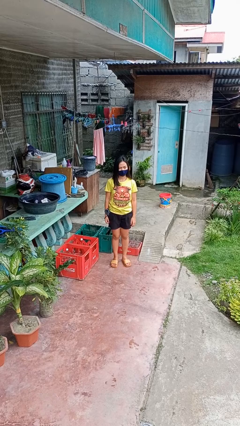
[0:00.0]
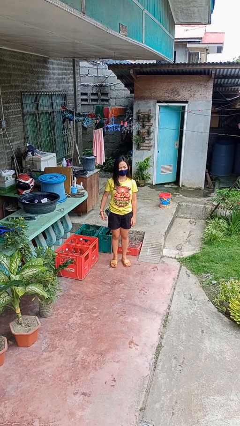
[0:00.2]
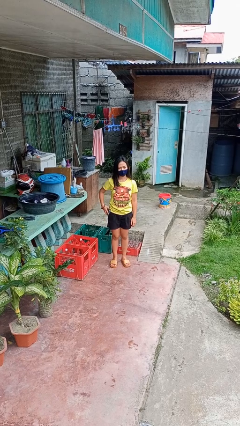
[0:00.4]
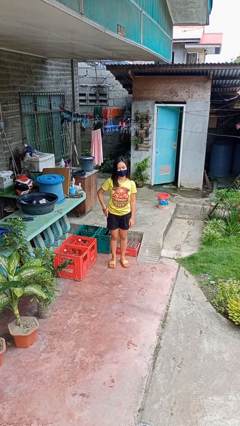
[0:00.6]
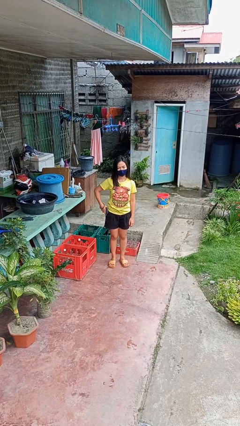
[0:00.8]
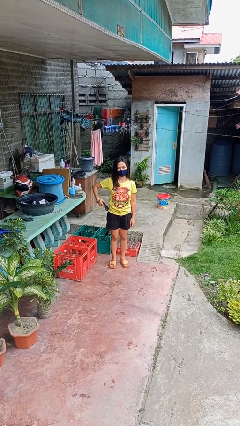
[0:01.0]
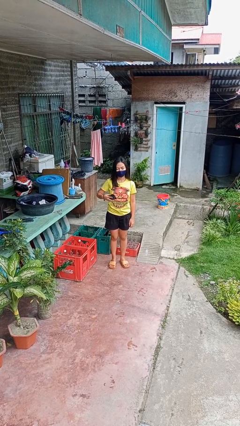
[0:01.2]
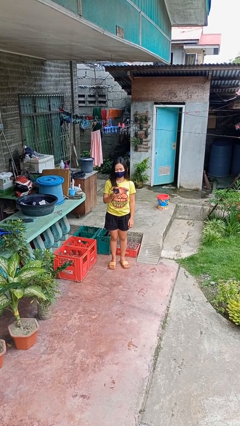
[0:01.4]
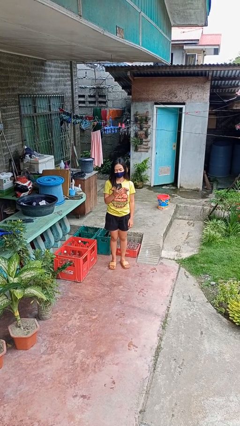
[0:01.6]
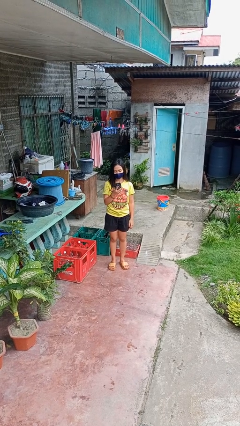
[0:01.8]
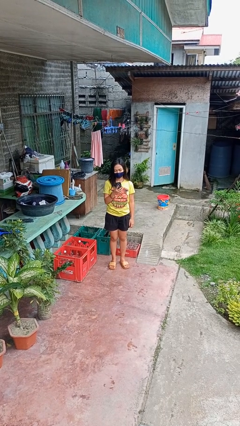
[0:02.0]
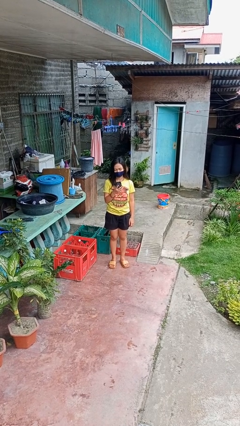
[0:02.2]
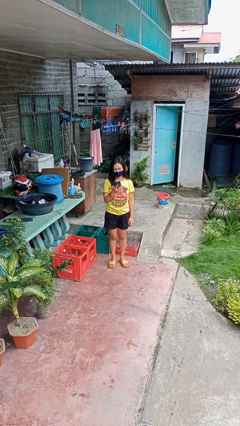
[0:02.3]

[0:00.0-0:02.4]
person takes phone from pocket

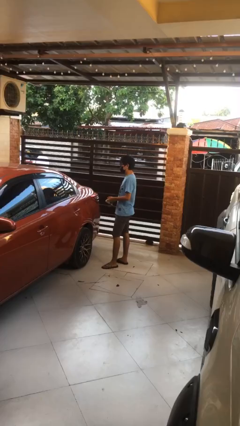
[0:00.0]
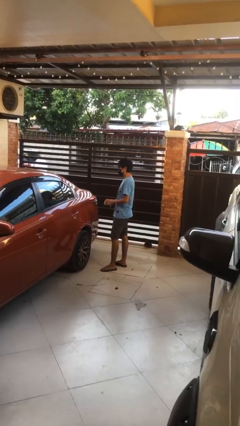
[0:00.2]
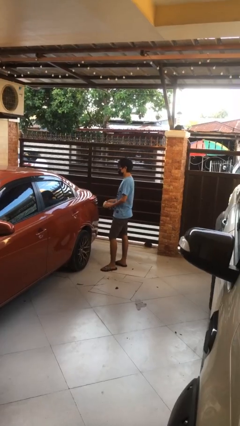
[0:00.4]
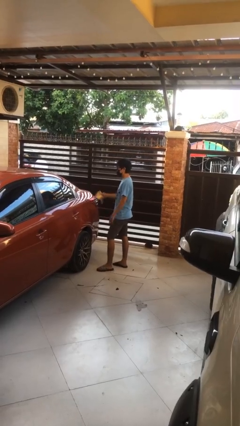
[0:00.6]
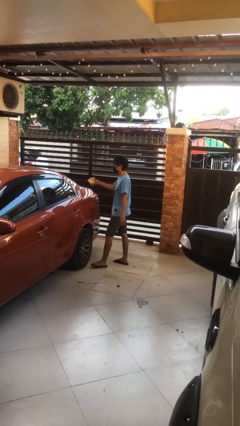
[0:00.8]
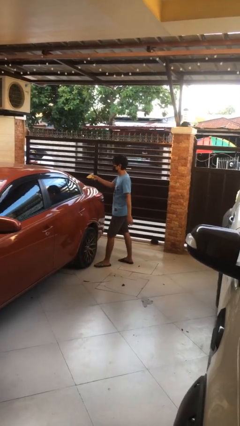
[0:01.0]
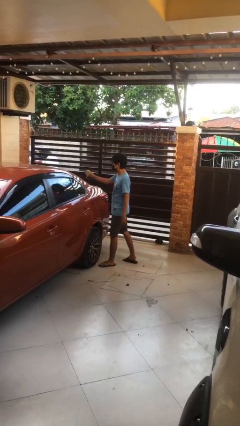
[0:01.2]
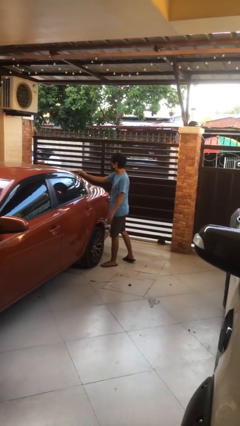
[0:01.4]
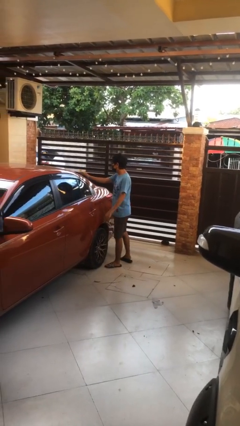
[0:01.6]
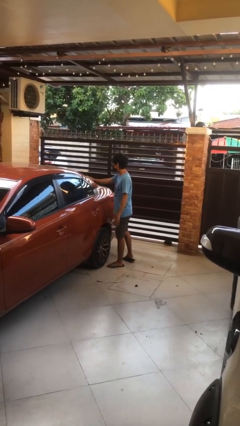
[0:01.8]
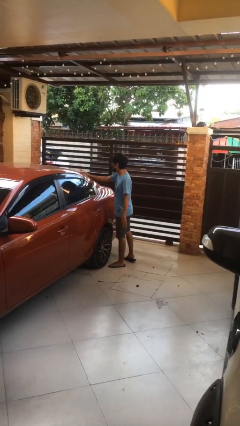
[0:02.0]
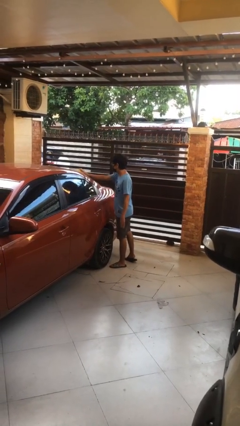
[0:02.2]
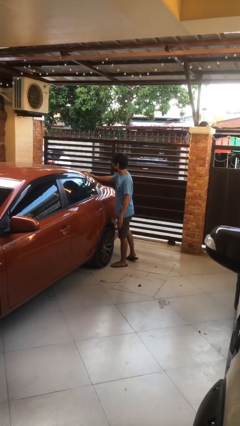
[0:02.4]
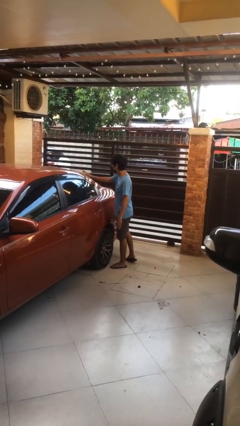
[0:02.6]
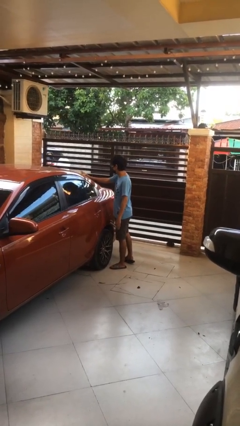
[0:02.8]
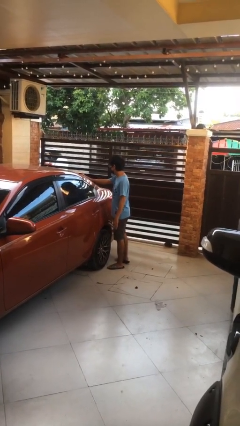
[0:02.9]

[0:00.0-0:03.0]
person polishes car with rag

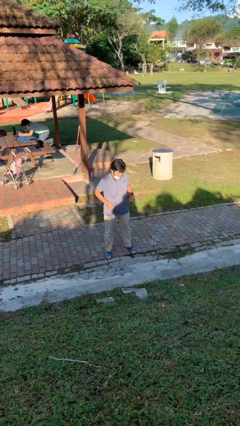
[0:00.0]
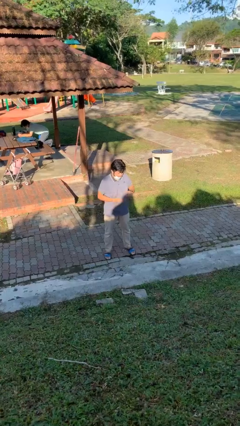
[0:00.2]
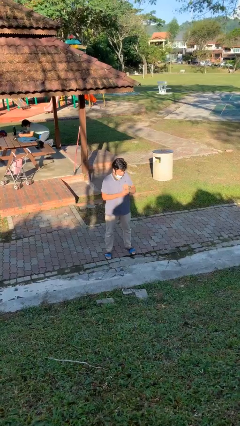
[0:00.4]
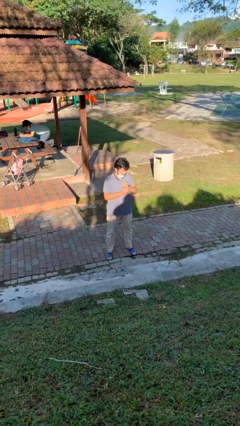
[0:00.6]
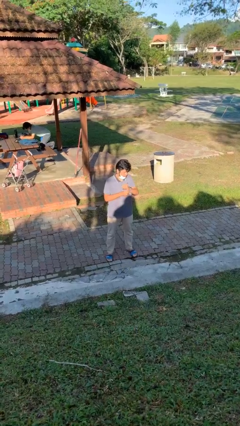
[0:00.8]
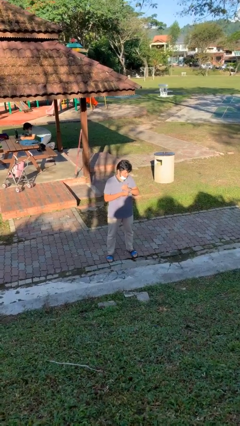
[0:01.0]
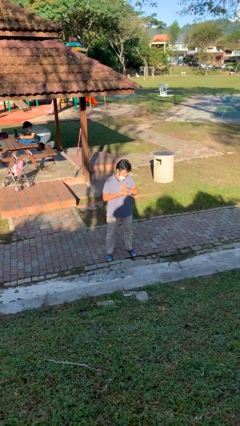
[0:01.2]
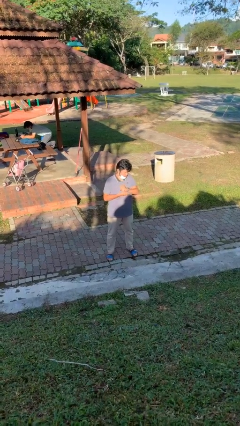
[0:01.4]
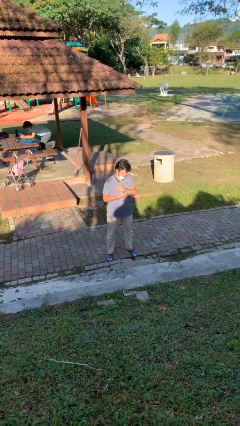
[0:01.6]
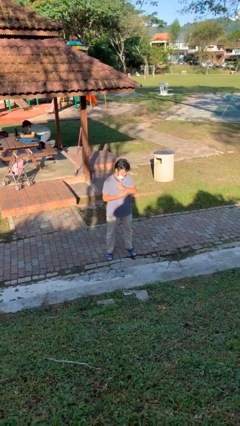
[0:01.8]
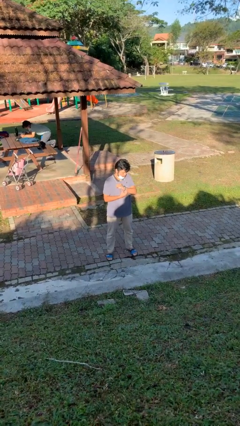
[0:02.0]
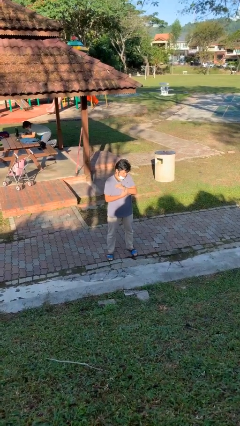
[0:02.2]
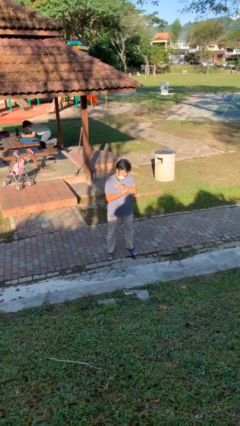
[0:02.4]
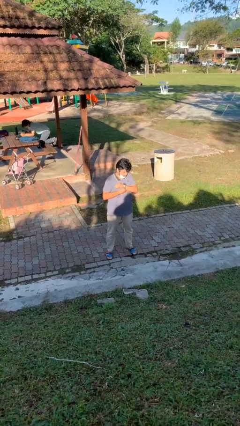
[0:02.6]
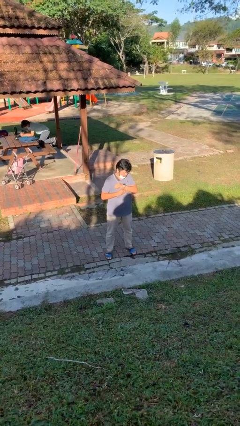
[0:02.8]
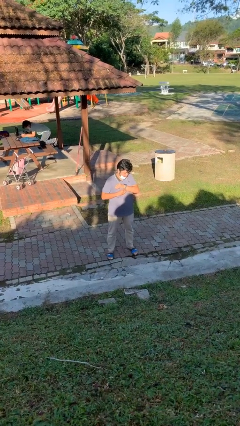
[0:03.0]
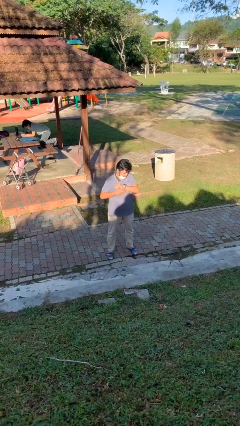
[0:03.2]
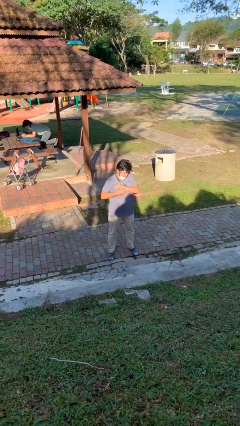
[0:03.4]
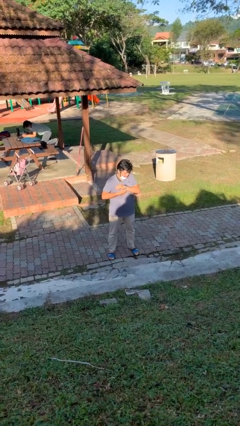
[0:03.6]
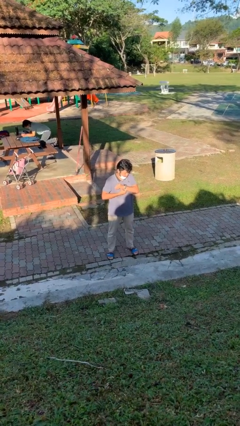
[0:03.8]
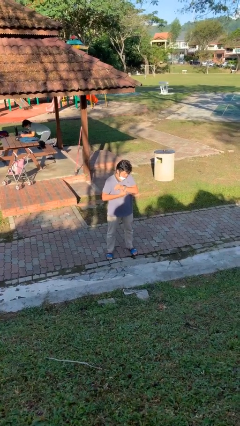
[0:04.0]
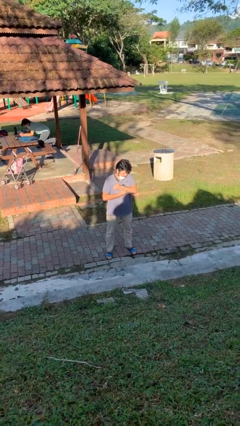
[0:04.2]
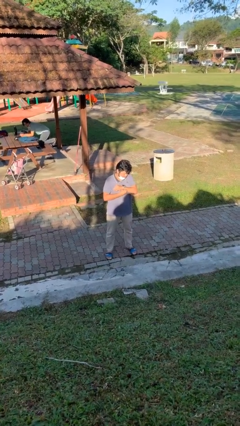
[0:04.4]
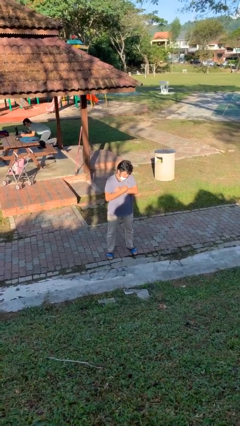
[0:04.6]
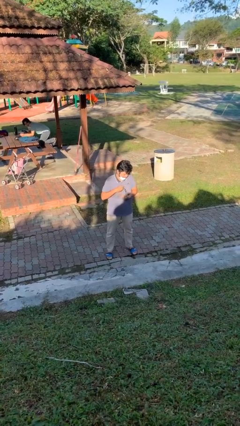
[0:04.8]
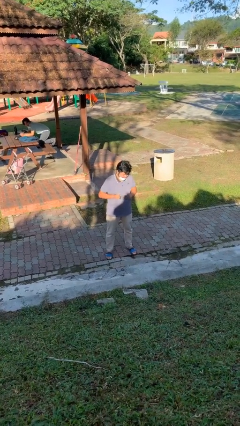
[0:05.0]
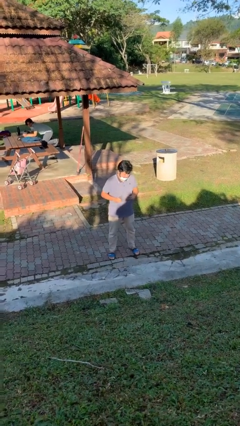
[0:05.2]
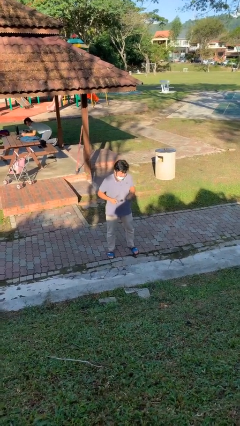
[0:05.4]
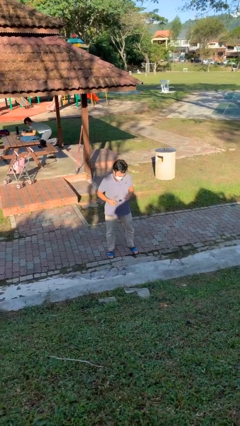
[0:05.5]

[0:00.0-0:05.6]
person takes off wristwatch

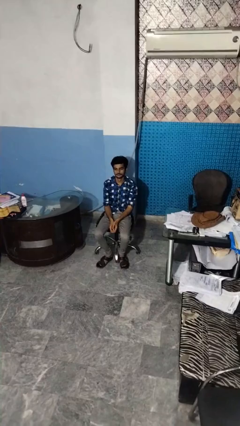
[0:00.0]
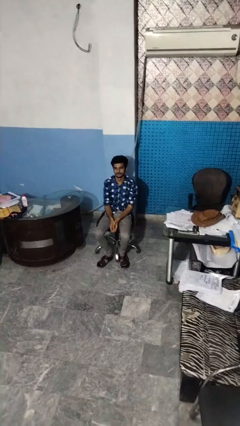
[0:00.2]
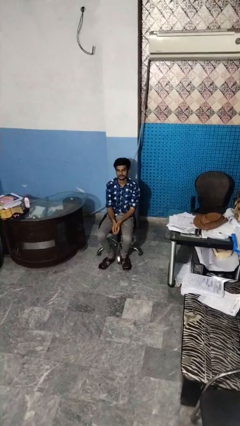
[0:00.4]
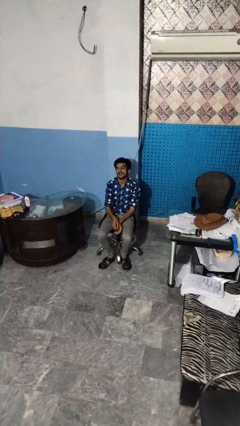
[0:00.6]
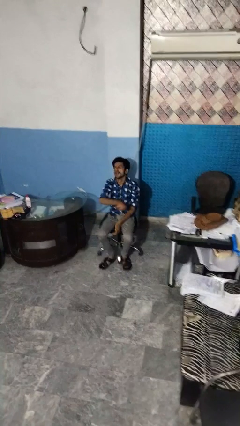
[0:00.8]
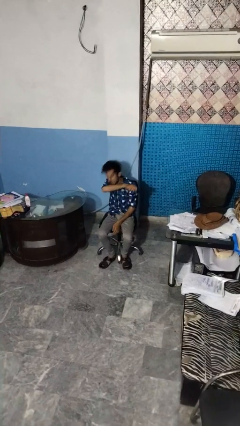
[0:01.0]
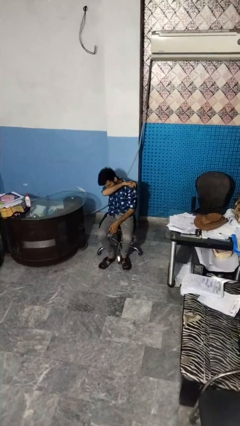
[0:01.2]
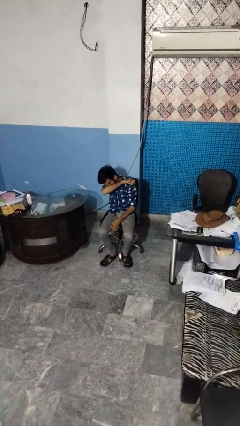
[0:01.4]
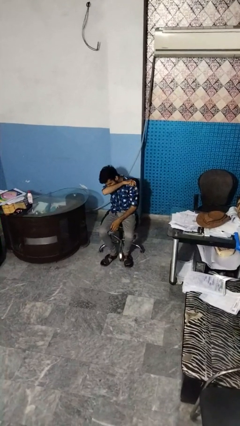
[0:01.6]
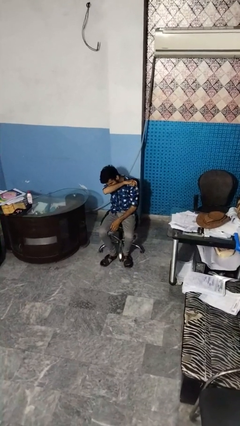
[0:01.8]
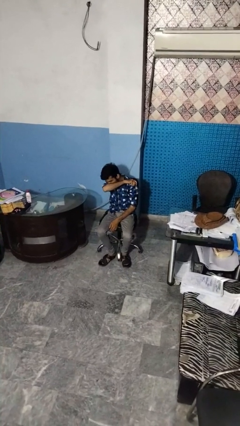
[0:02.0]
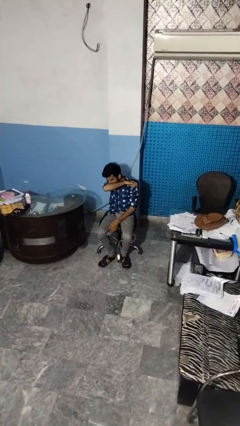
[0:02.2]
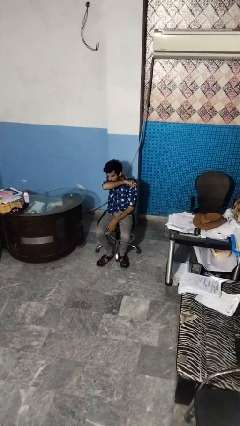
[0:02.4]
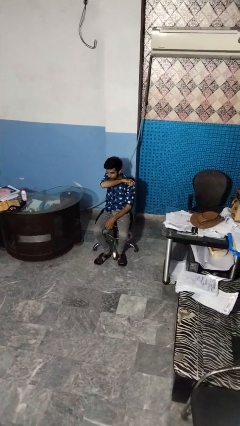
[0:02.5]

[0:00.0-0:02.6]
person sneezes into arm

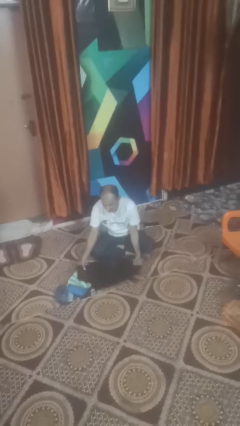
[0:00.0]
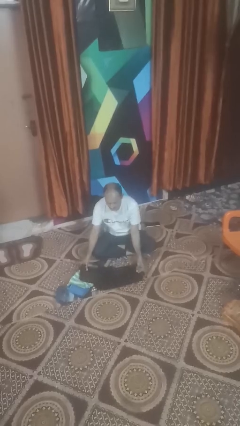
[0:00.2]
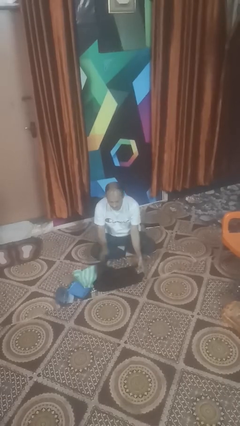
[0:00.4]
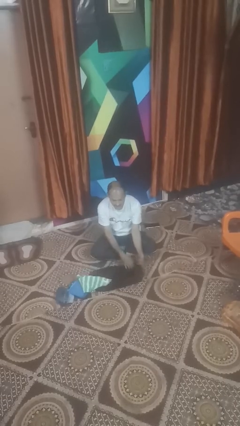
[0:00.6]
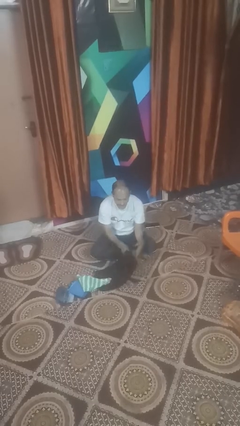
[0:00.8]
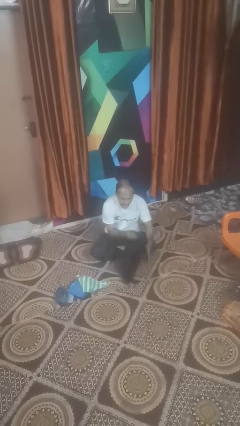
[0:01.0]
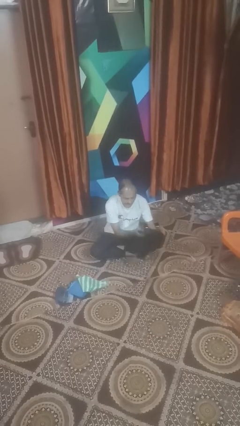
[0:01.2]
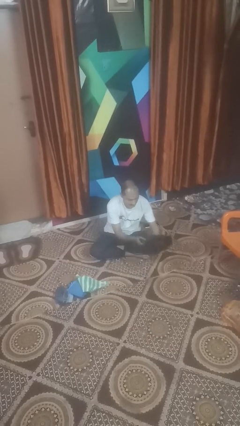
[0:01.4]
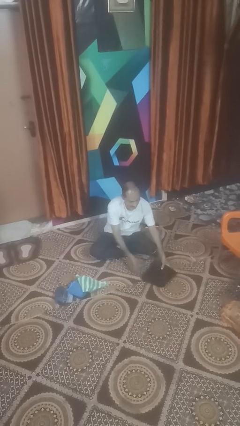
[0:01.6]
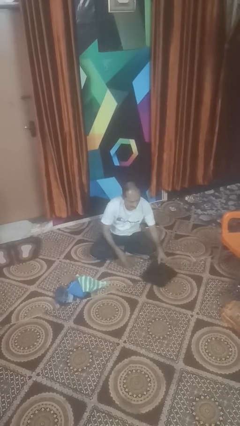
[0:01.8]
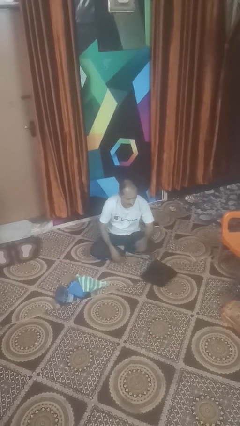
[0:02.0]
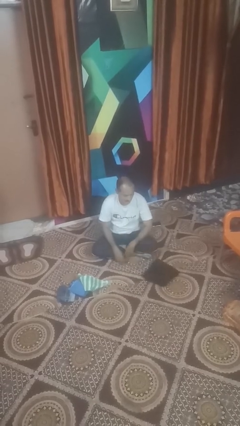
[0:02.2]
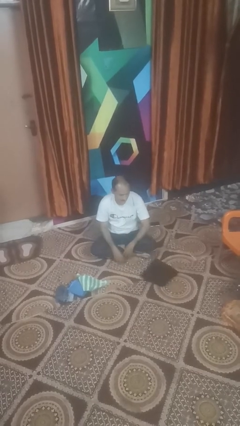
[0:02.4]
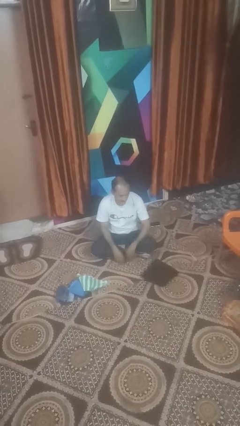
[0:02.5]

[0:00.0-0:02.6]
person folds pants

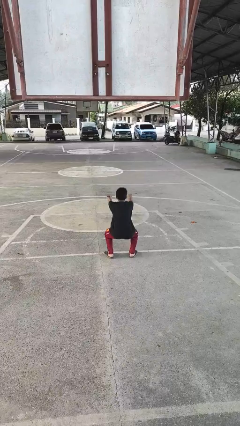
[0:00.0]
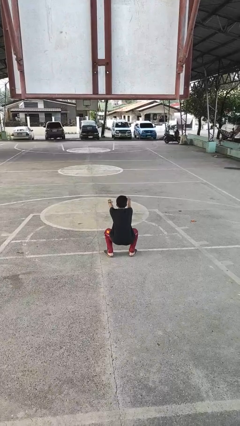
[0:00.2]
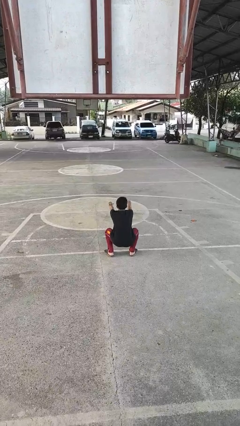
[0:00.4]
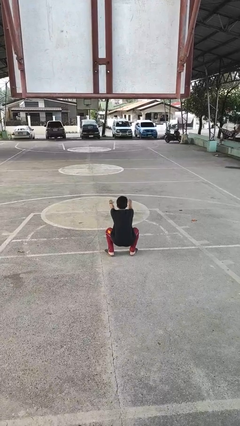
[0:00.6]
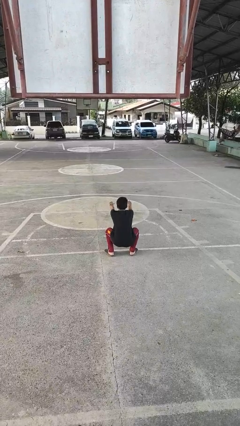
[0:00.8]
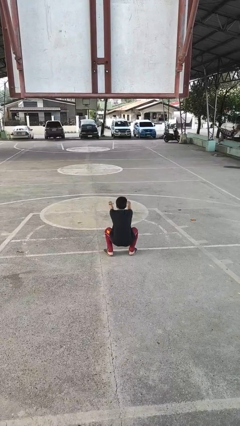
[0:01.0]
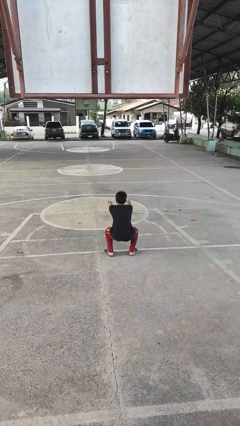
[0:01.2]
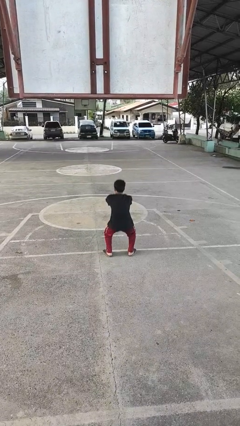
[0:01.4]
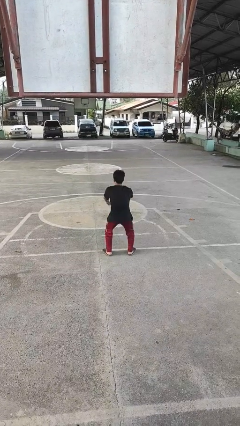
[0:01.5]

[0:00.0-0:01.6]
person squats
